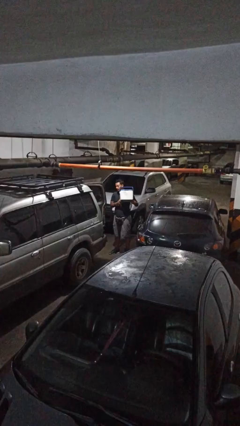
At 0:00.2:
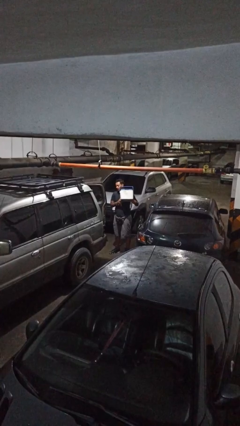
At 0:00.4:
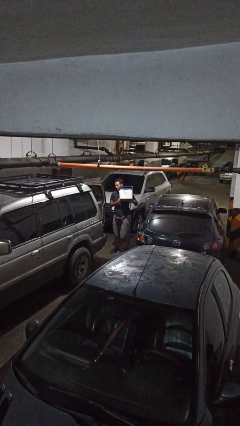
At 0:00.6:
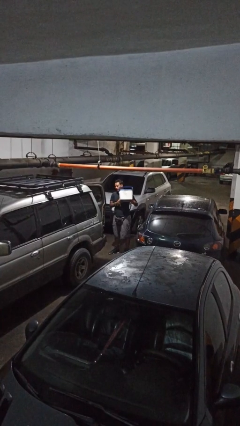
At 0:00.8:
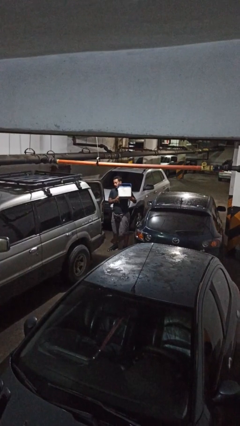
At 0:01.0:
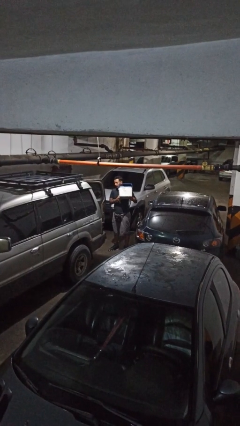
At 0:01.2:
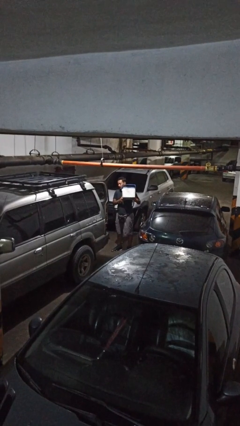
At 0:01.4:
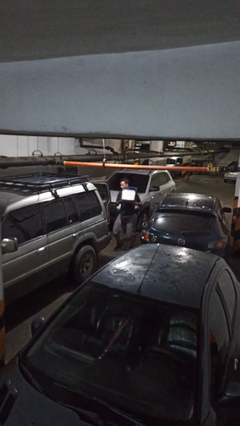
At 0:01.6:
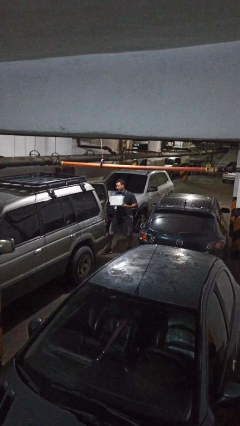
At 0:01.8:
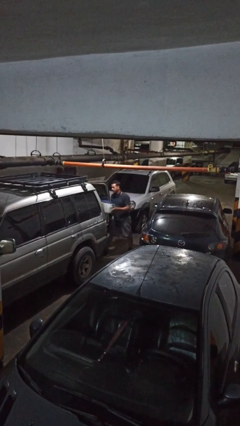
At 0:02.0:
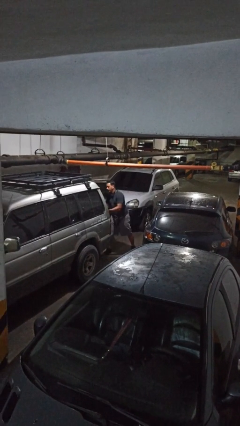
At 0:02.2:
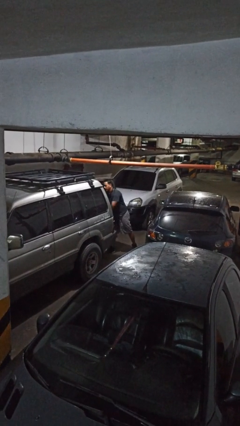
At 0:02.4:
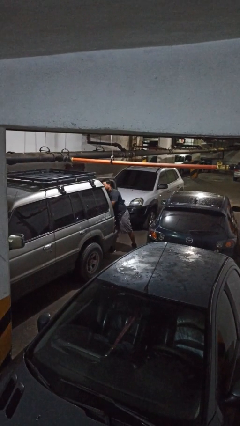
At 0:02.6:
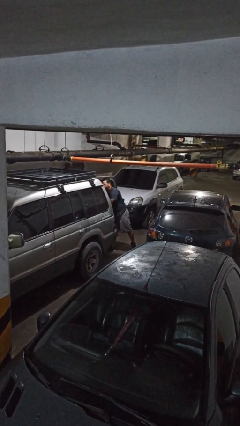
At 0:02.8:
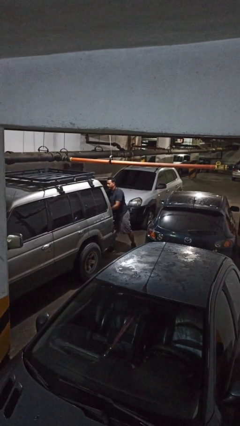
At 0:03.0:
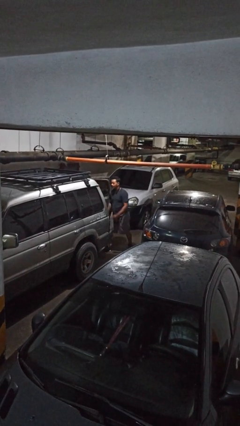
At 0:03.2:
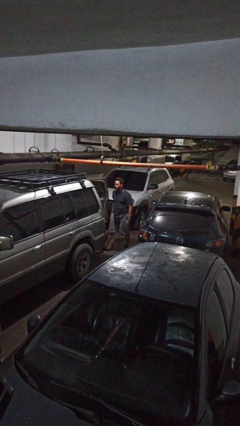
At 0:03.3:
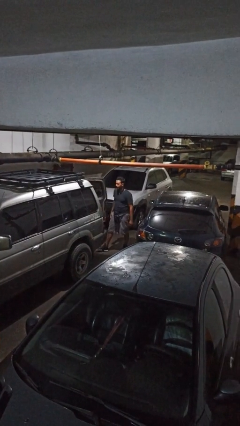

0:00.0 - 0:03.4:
person loads car

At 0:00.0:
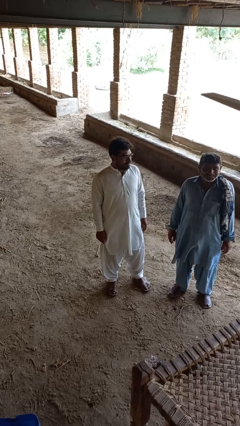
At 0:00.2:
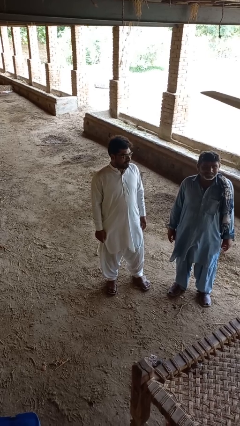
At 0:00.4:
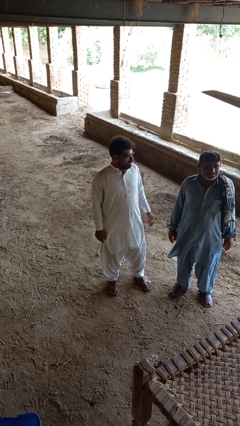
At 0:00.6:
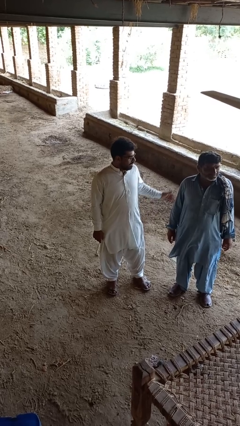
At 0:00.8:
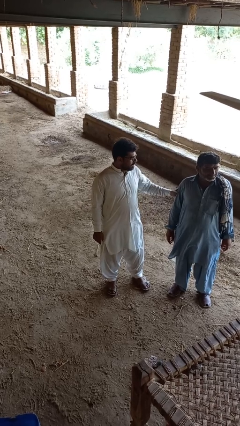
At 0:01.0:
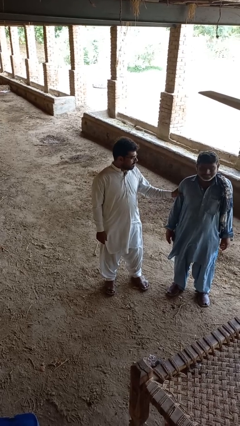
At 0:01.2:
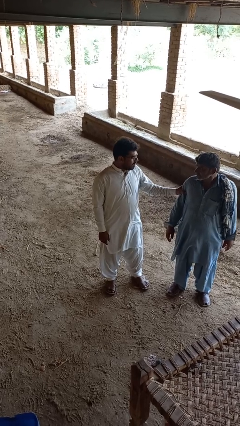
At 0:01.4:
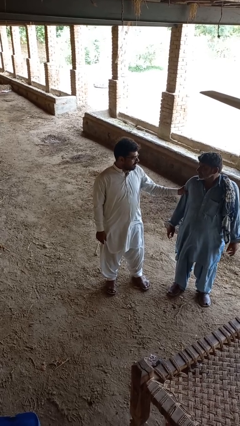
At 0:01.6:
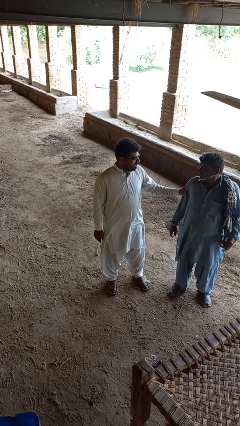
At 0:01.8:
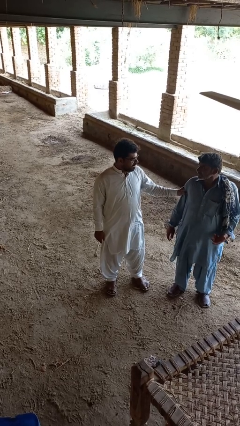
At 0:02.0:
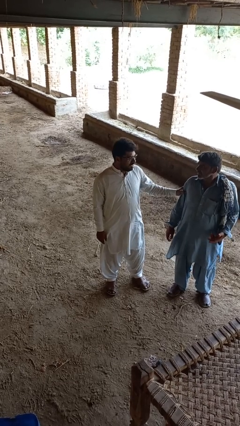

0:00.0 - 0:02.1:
person grabs person by bicep

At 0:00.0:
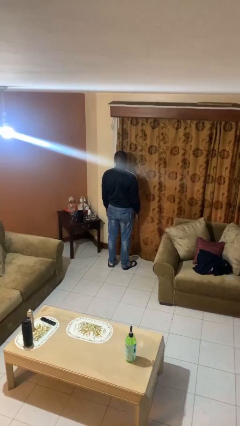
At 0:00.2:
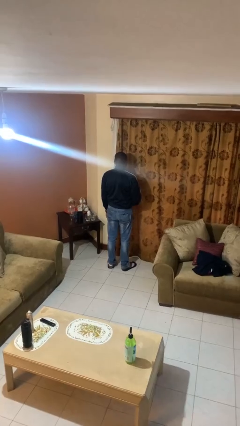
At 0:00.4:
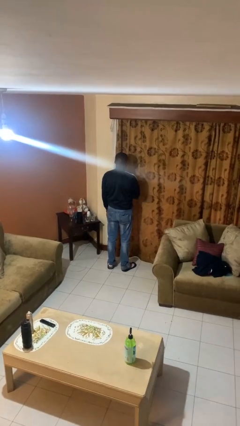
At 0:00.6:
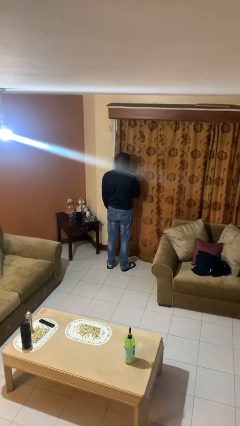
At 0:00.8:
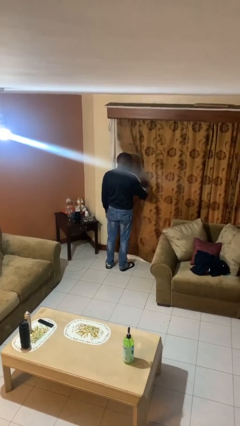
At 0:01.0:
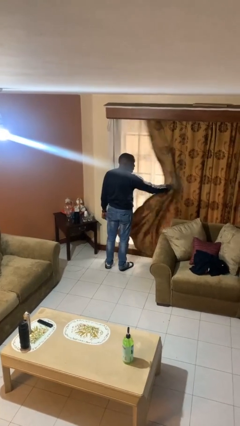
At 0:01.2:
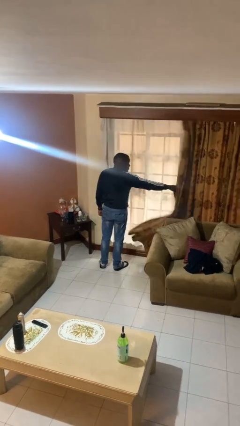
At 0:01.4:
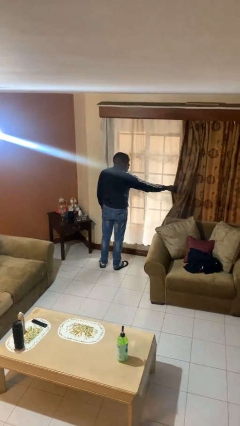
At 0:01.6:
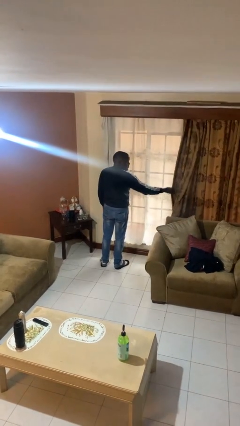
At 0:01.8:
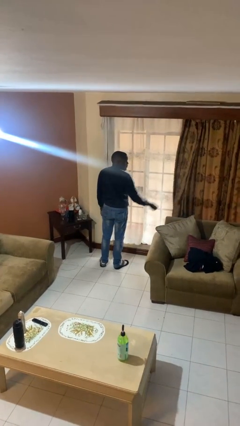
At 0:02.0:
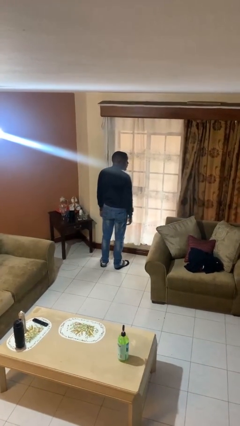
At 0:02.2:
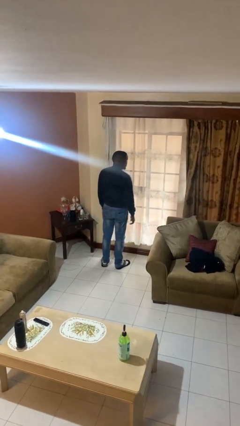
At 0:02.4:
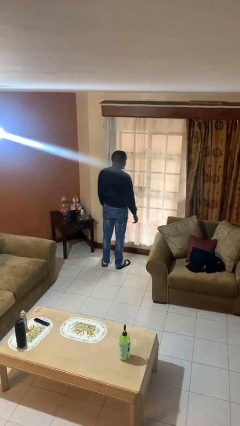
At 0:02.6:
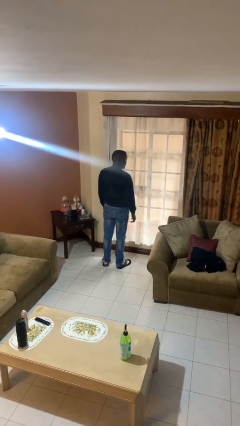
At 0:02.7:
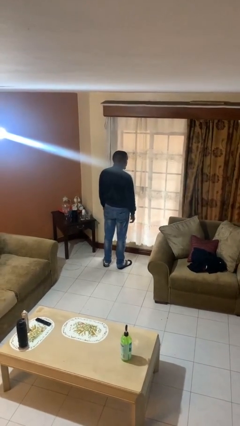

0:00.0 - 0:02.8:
person opens curtains

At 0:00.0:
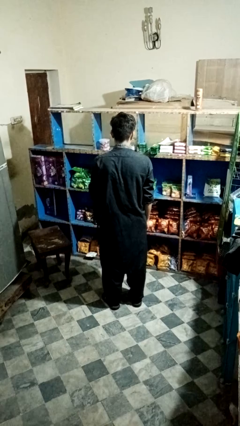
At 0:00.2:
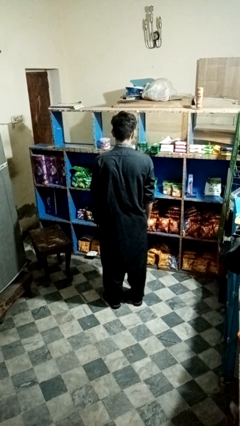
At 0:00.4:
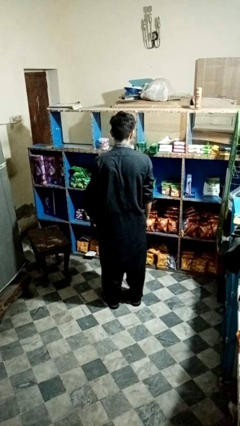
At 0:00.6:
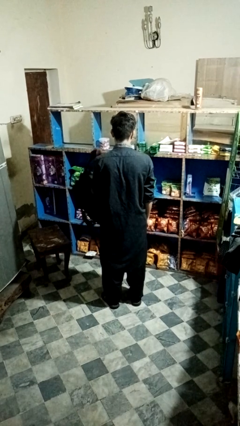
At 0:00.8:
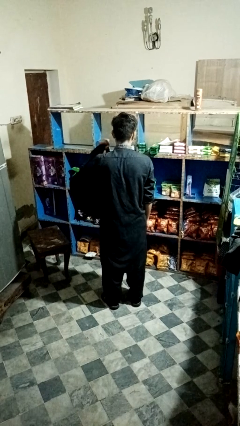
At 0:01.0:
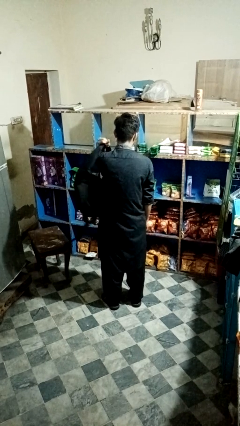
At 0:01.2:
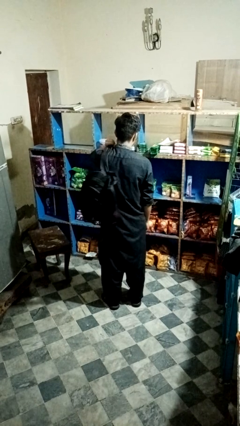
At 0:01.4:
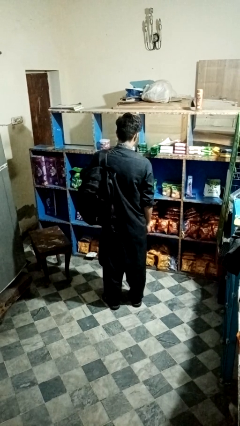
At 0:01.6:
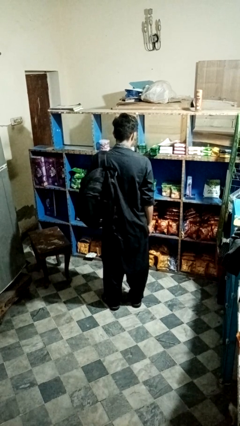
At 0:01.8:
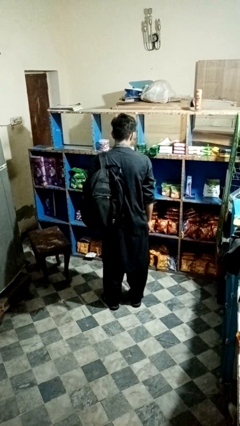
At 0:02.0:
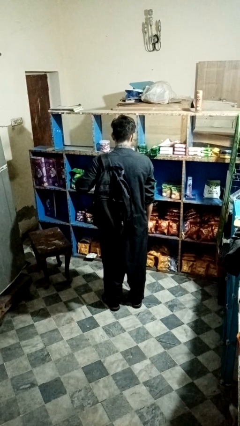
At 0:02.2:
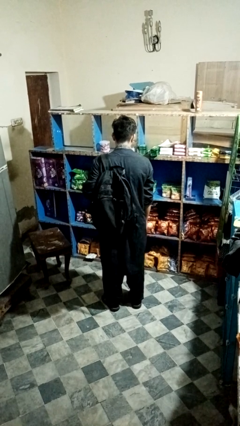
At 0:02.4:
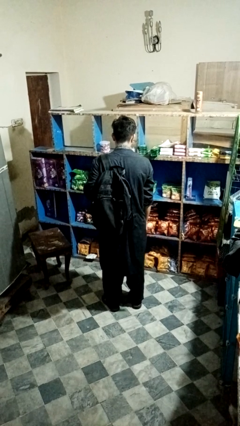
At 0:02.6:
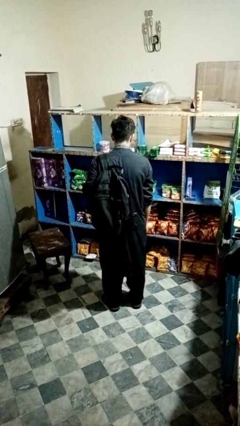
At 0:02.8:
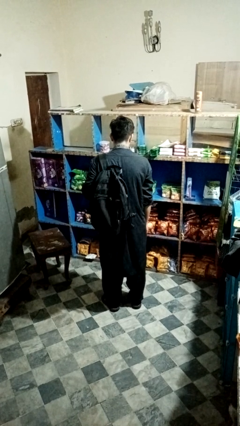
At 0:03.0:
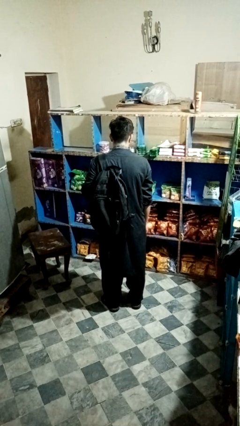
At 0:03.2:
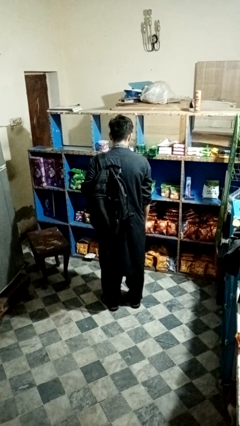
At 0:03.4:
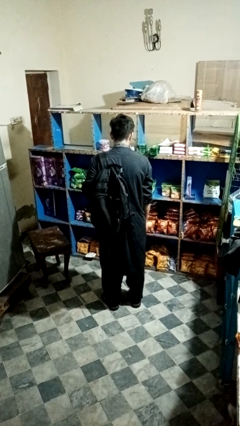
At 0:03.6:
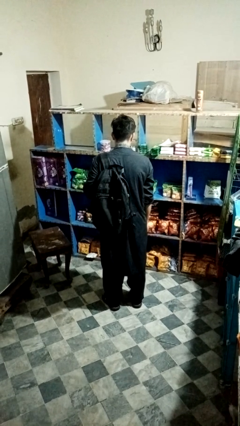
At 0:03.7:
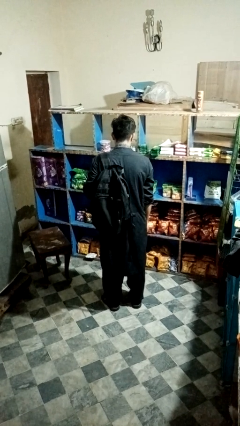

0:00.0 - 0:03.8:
person puts on backpack

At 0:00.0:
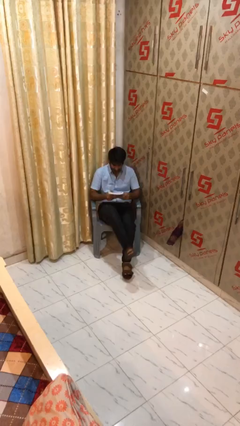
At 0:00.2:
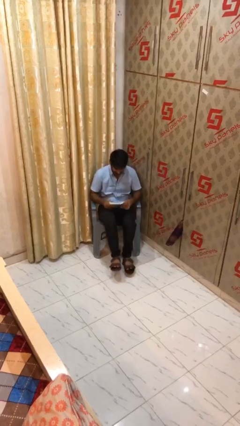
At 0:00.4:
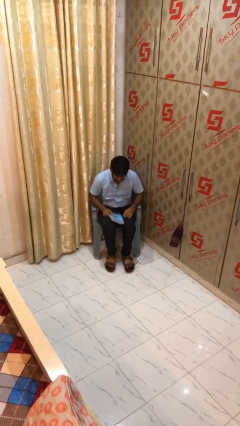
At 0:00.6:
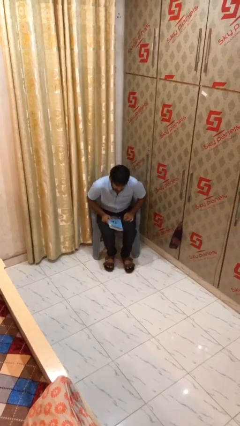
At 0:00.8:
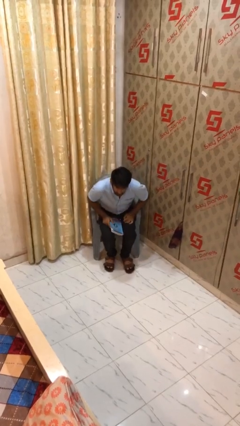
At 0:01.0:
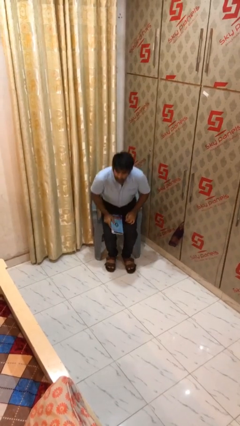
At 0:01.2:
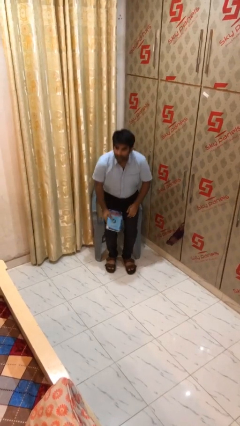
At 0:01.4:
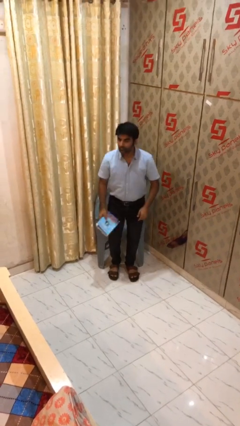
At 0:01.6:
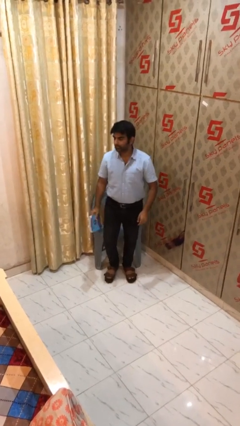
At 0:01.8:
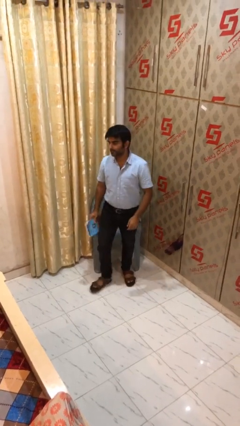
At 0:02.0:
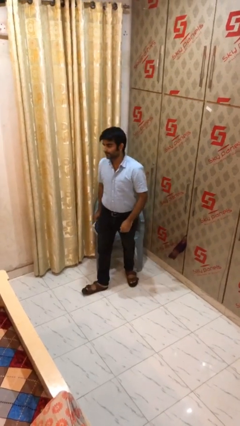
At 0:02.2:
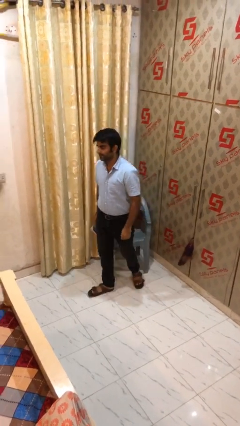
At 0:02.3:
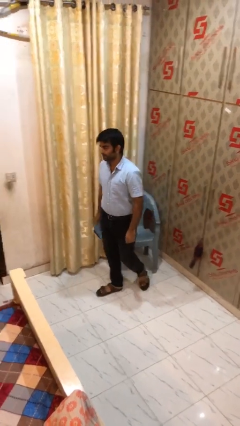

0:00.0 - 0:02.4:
person stands up
